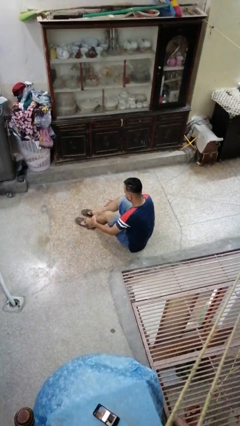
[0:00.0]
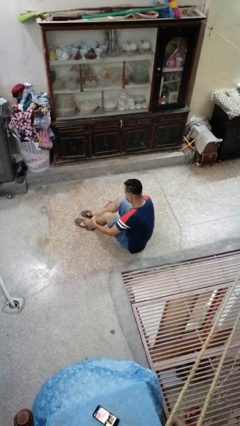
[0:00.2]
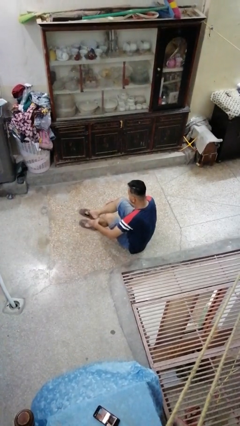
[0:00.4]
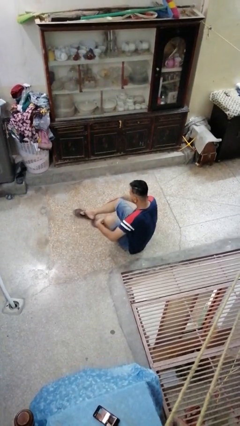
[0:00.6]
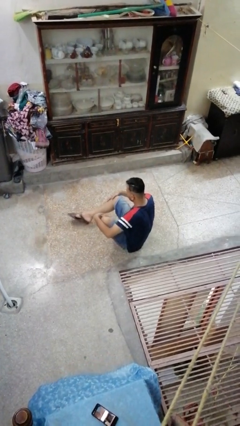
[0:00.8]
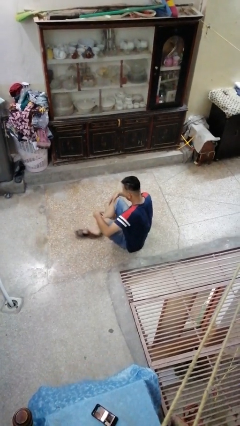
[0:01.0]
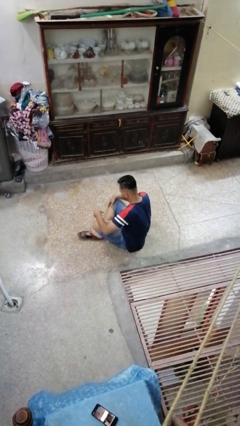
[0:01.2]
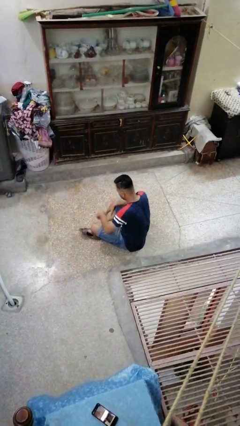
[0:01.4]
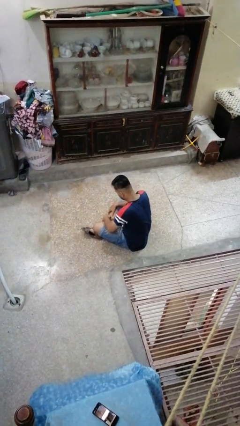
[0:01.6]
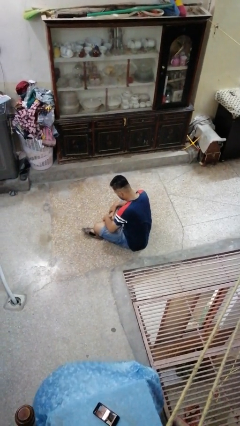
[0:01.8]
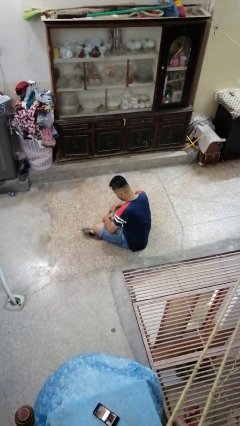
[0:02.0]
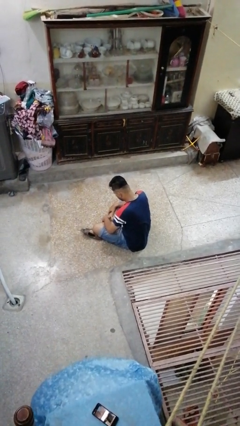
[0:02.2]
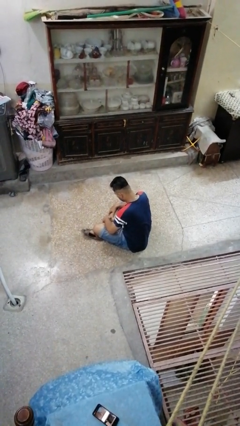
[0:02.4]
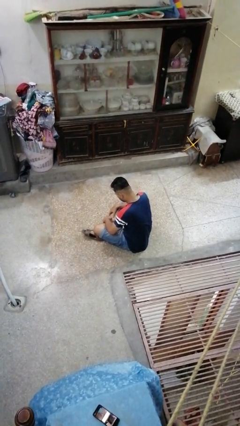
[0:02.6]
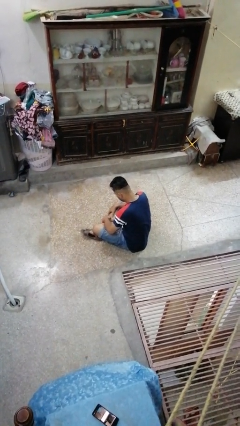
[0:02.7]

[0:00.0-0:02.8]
person crosses legs

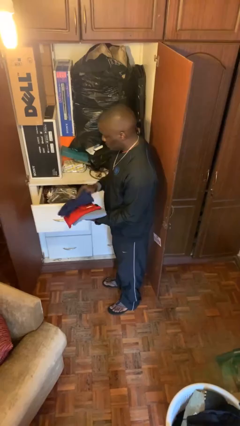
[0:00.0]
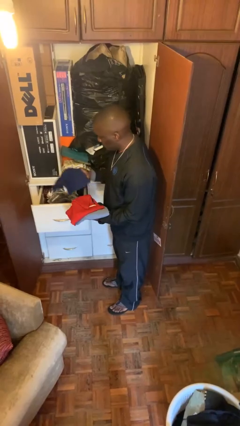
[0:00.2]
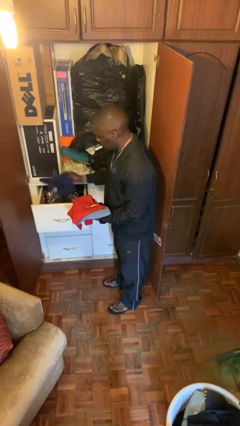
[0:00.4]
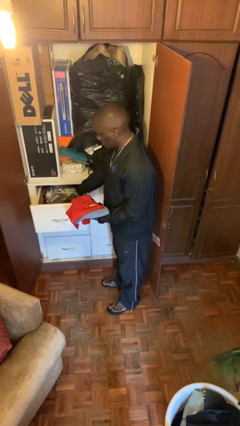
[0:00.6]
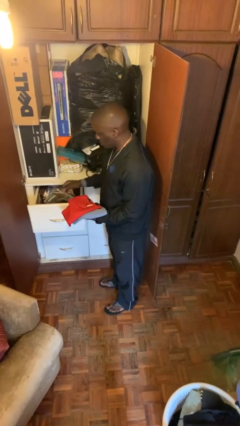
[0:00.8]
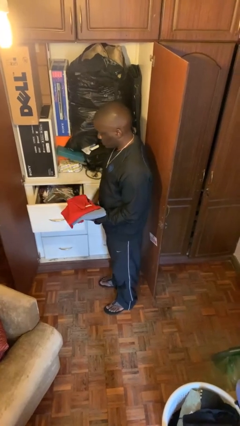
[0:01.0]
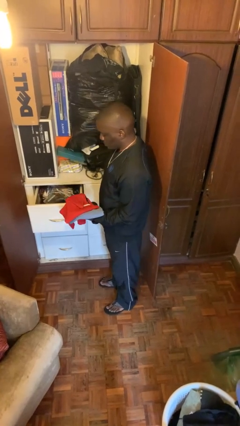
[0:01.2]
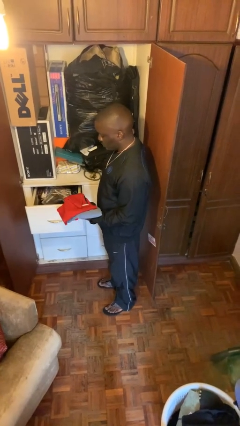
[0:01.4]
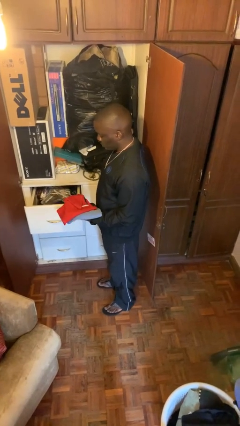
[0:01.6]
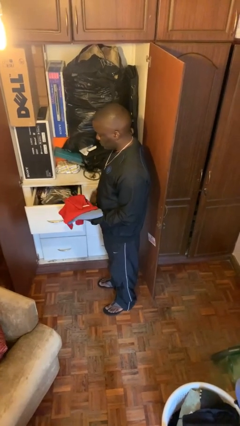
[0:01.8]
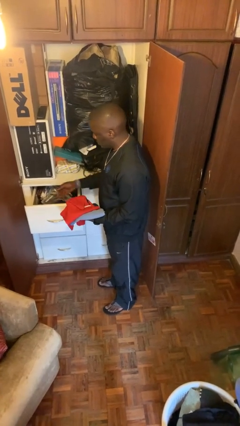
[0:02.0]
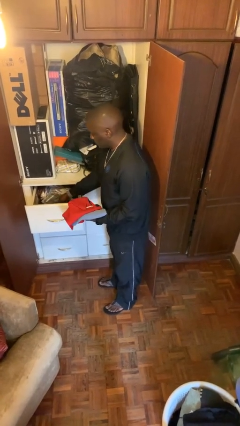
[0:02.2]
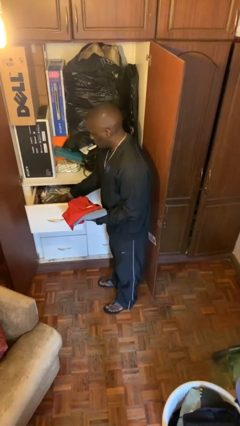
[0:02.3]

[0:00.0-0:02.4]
person puts clothes into dresser

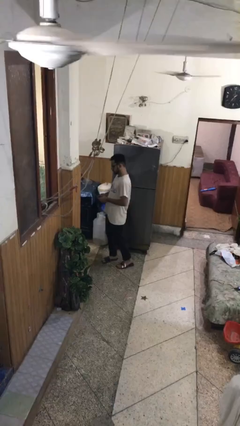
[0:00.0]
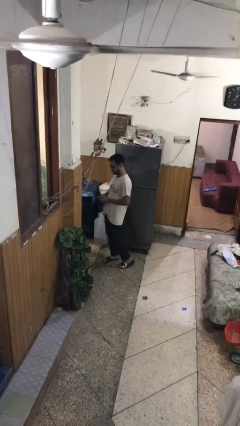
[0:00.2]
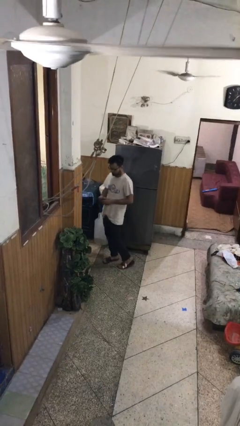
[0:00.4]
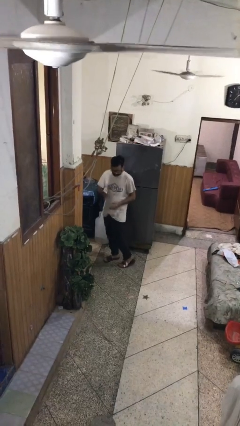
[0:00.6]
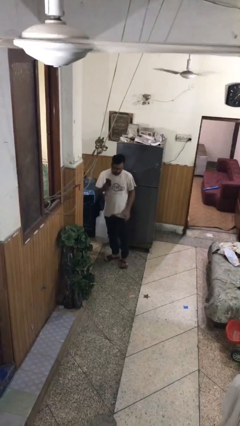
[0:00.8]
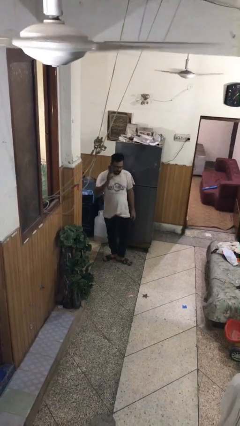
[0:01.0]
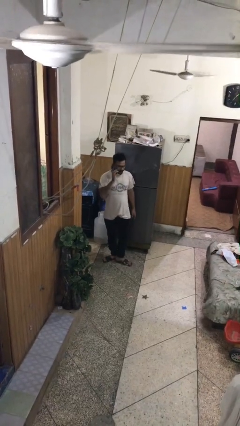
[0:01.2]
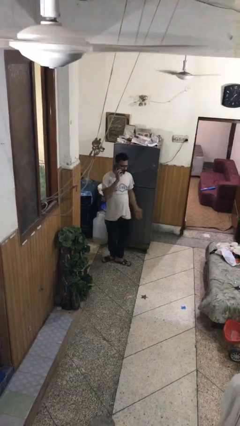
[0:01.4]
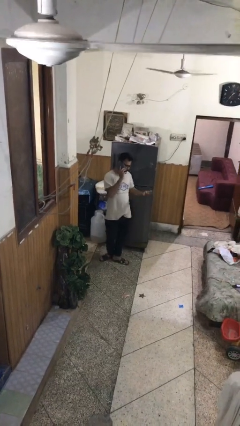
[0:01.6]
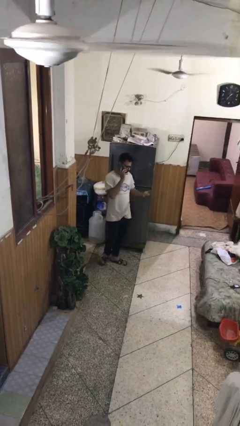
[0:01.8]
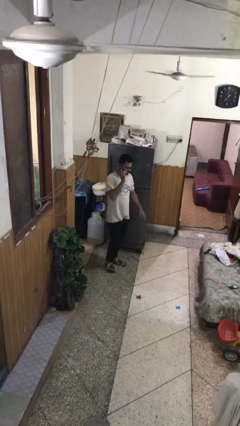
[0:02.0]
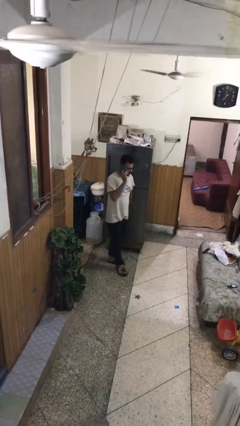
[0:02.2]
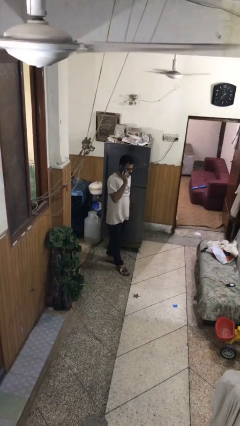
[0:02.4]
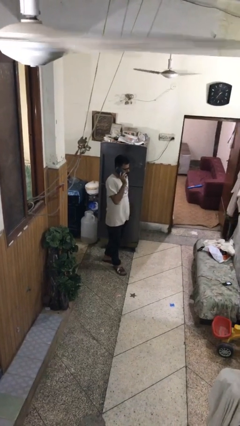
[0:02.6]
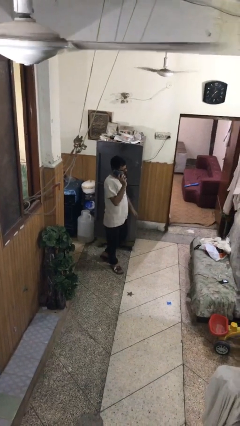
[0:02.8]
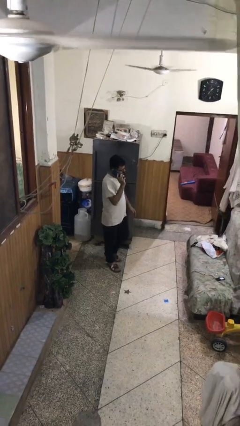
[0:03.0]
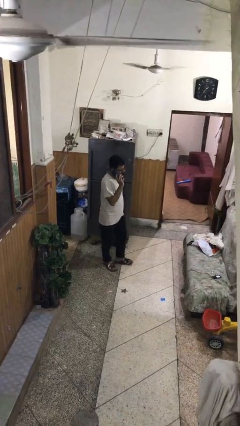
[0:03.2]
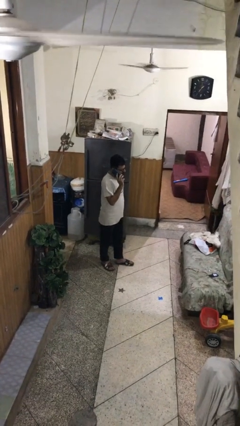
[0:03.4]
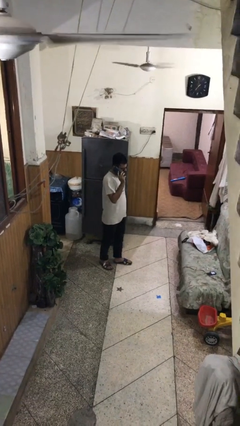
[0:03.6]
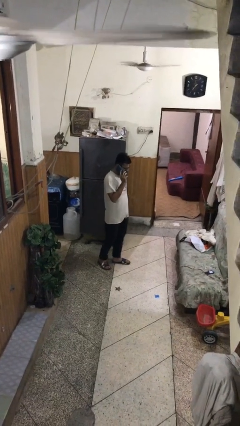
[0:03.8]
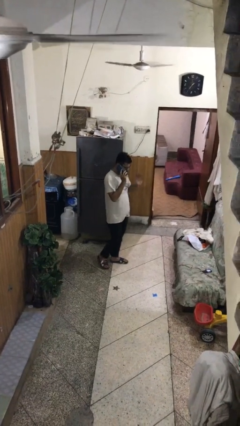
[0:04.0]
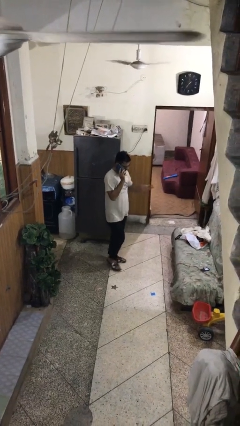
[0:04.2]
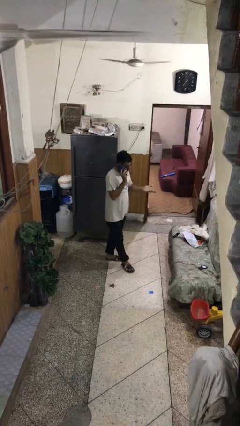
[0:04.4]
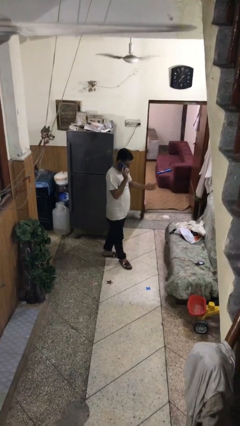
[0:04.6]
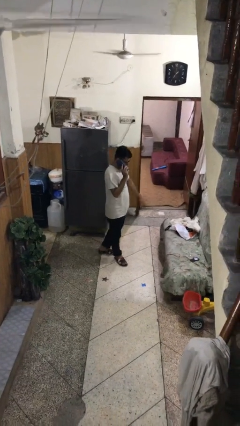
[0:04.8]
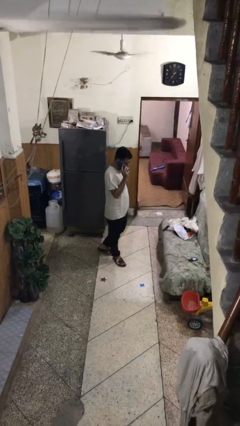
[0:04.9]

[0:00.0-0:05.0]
person talks on phone

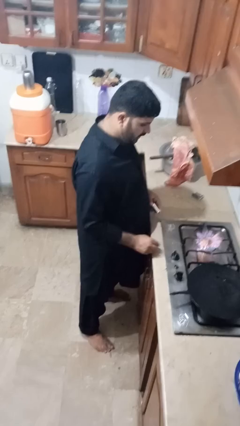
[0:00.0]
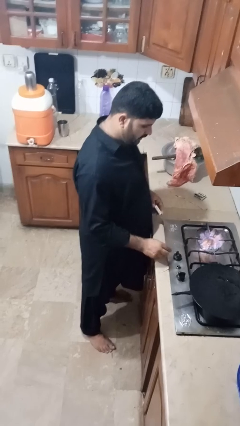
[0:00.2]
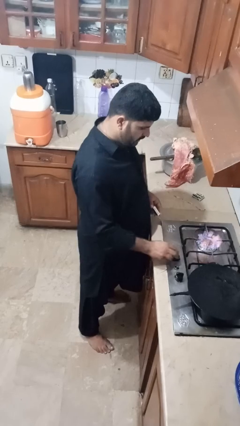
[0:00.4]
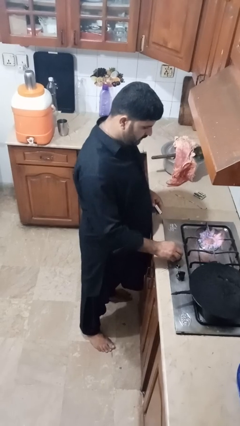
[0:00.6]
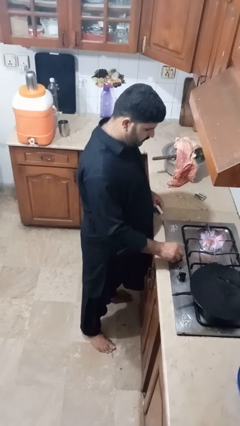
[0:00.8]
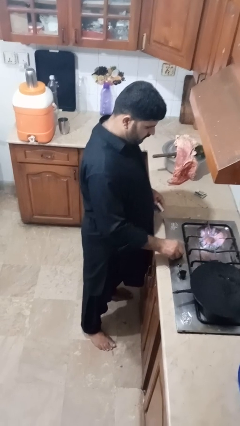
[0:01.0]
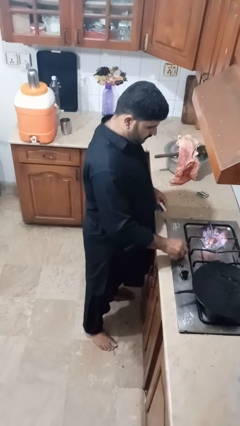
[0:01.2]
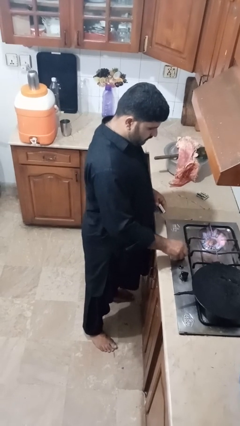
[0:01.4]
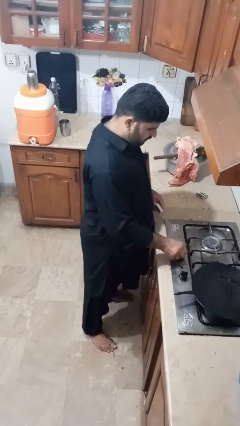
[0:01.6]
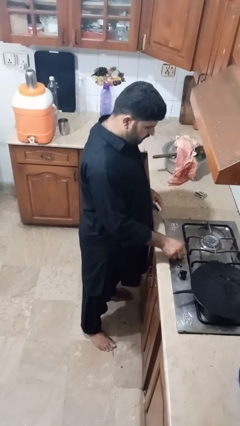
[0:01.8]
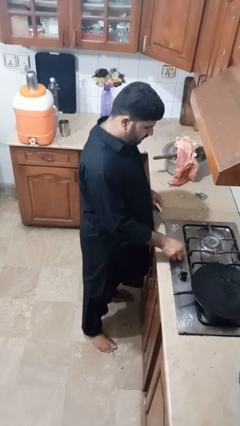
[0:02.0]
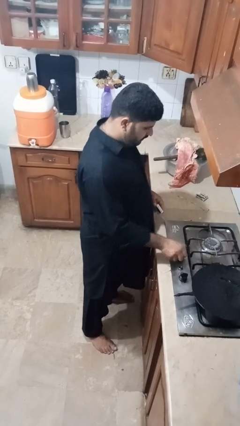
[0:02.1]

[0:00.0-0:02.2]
person turns off stovetop

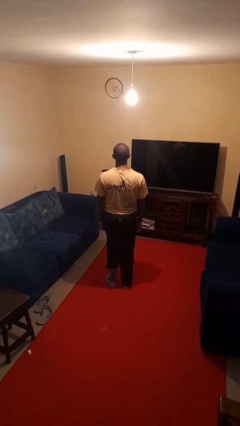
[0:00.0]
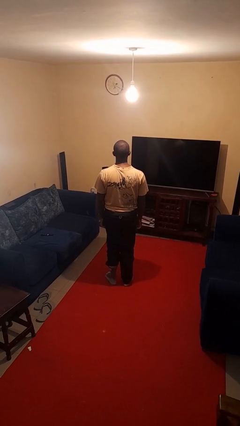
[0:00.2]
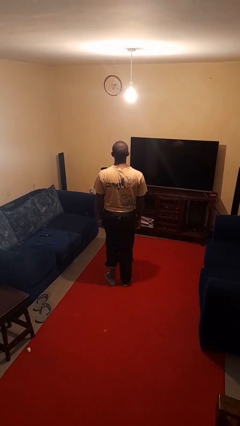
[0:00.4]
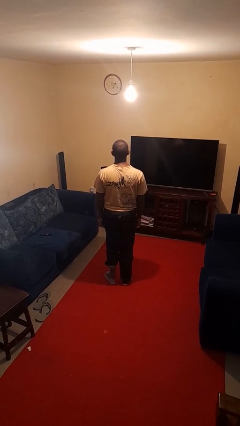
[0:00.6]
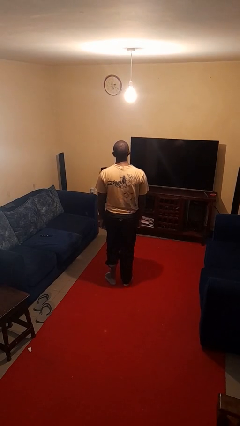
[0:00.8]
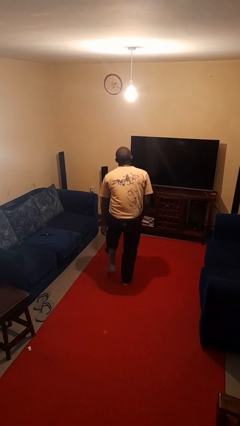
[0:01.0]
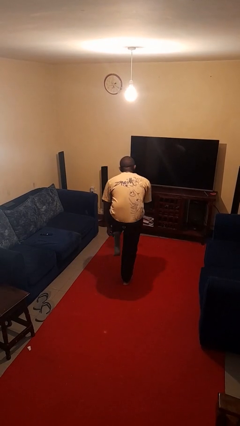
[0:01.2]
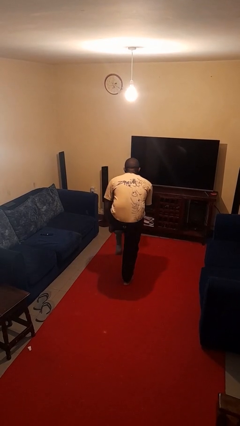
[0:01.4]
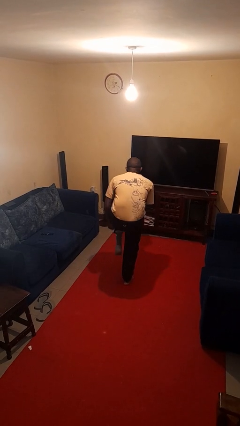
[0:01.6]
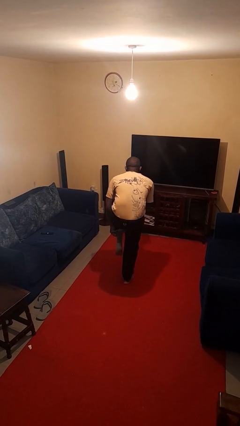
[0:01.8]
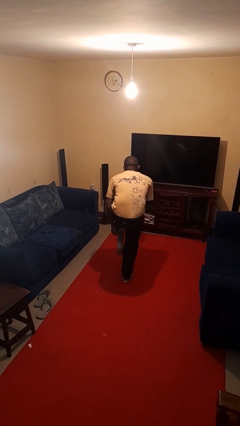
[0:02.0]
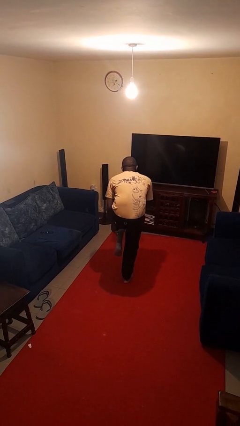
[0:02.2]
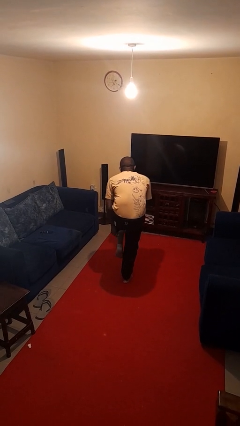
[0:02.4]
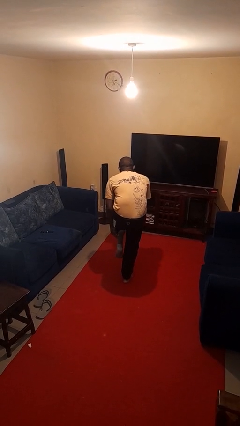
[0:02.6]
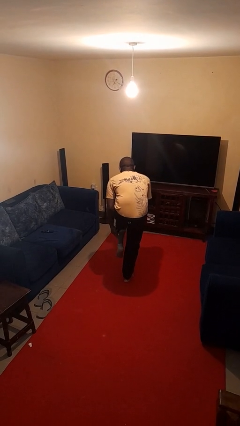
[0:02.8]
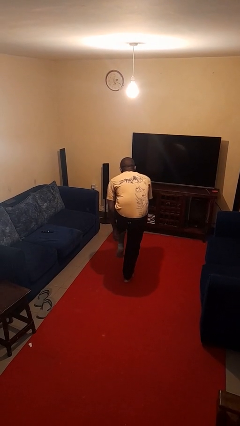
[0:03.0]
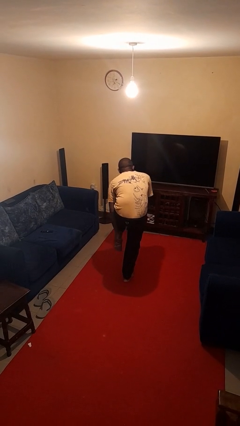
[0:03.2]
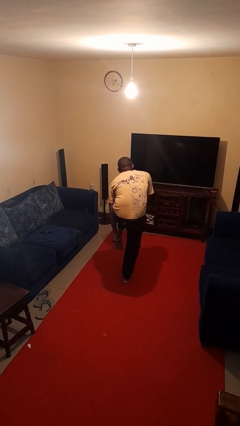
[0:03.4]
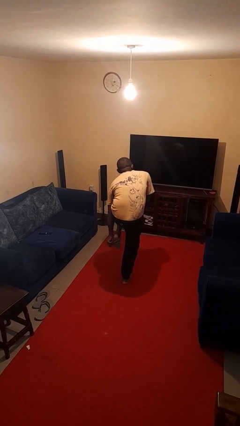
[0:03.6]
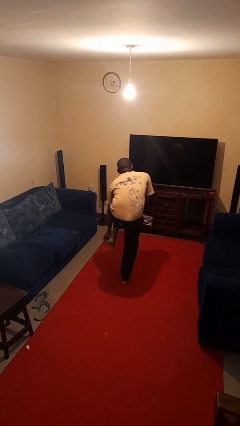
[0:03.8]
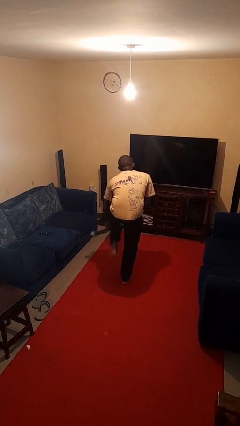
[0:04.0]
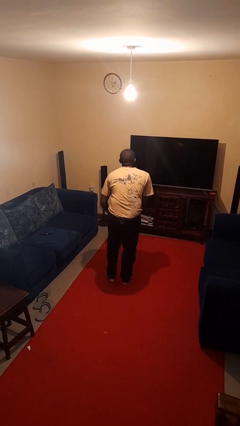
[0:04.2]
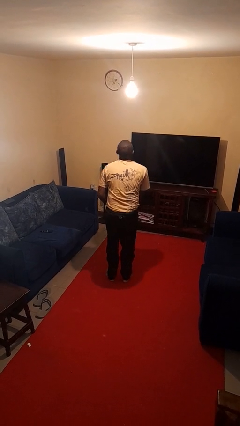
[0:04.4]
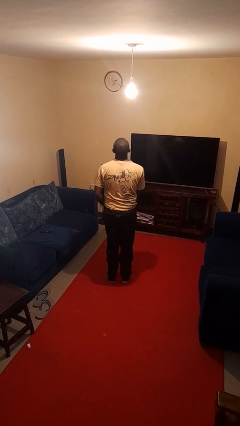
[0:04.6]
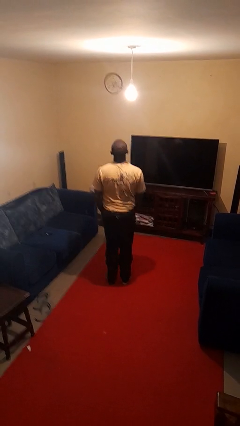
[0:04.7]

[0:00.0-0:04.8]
person takes off socks

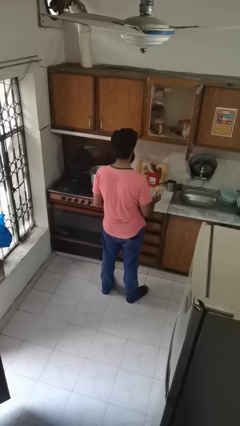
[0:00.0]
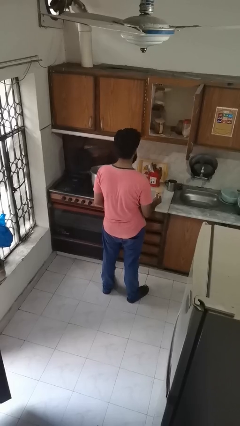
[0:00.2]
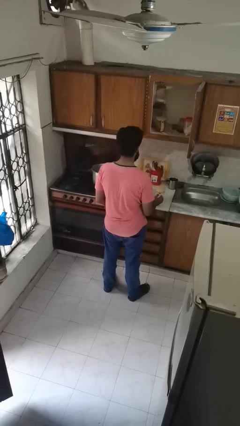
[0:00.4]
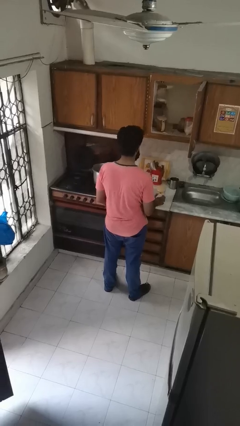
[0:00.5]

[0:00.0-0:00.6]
person puts down object into cabinet
